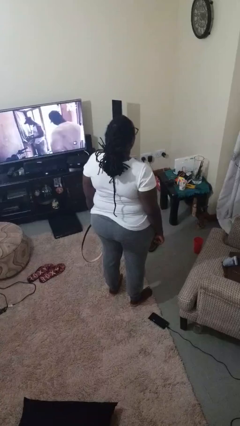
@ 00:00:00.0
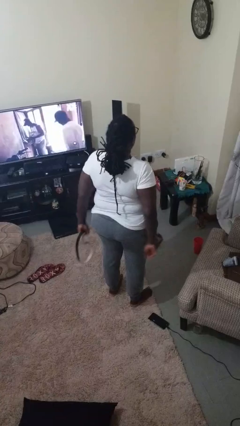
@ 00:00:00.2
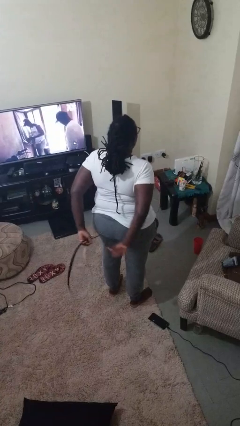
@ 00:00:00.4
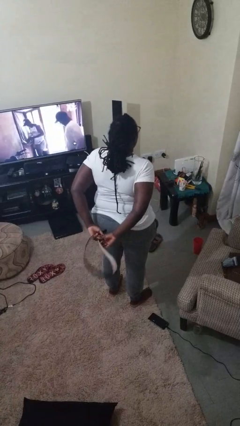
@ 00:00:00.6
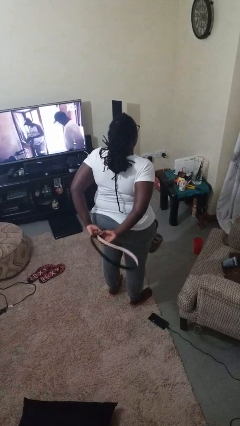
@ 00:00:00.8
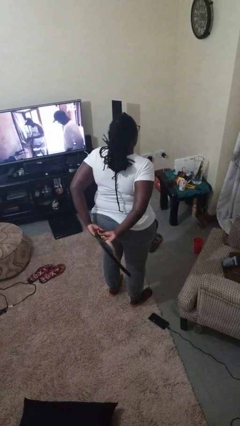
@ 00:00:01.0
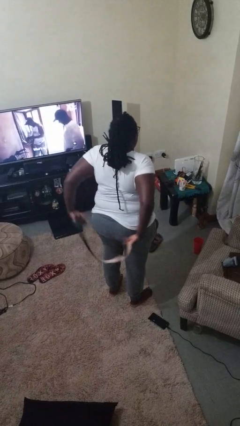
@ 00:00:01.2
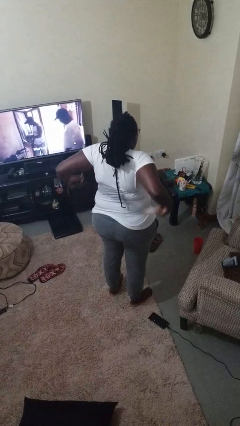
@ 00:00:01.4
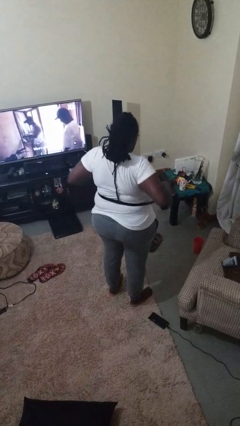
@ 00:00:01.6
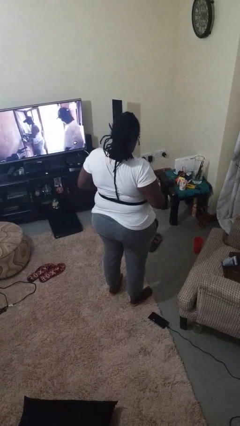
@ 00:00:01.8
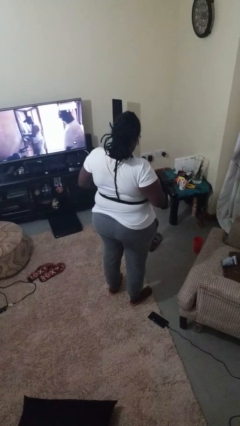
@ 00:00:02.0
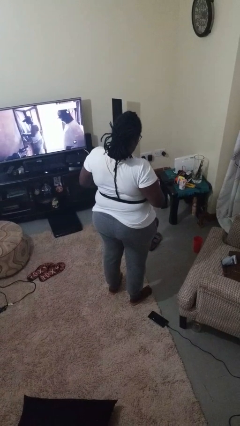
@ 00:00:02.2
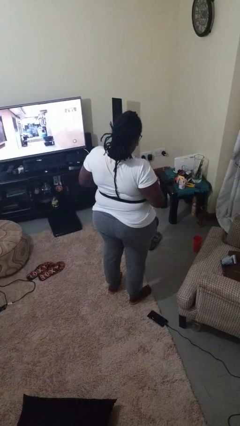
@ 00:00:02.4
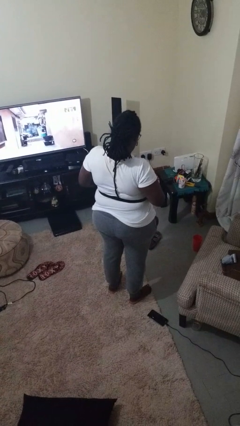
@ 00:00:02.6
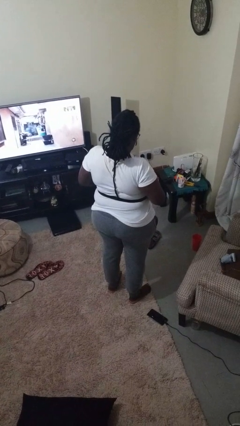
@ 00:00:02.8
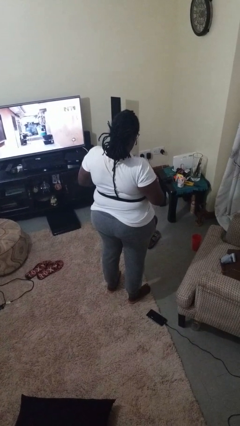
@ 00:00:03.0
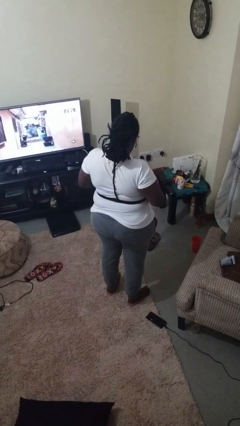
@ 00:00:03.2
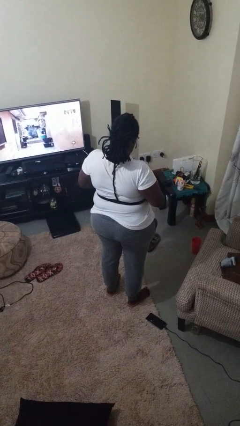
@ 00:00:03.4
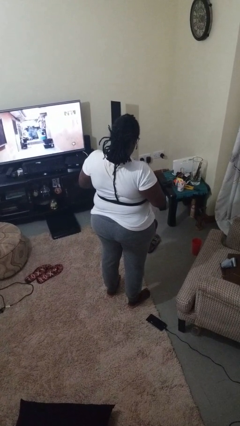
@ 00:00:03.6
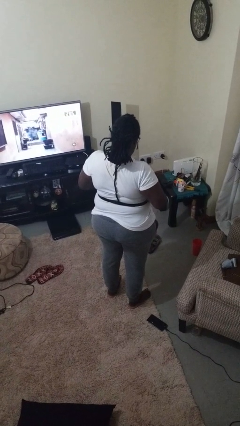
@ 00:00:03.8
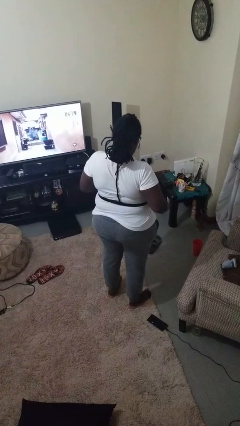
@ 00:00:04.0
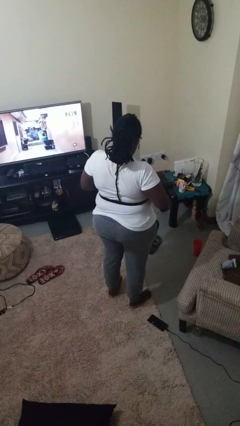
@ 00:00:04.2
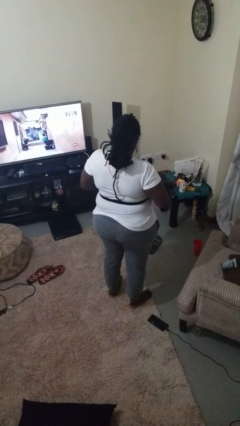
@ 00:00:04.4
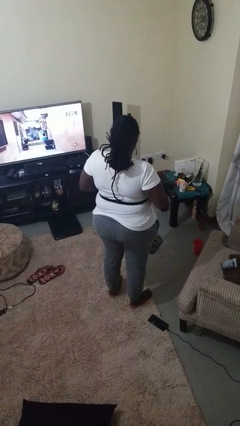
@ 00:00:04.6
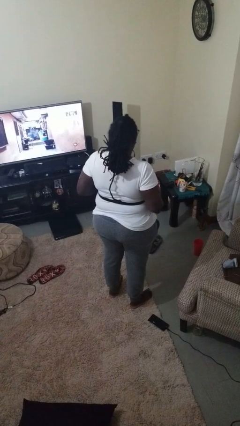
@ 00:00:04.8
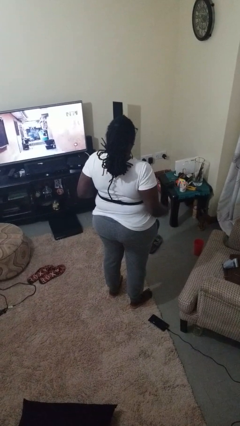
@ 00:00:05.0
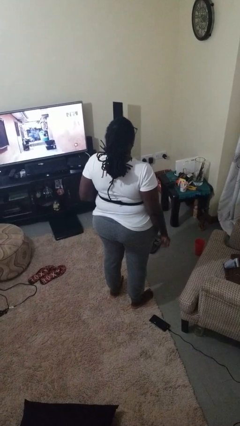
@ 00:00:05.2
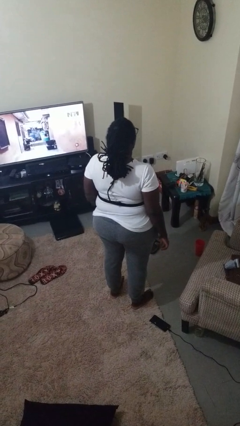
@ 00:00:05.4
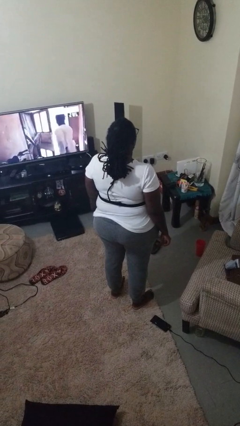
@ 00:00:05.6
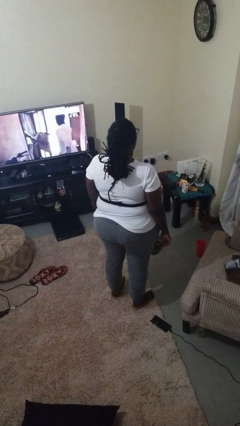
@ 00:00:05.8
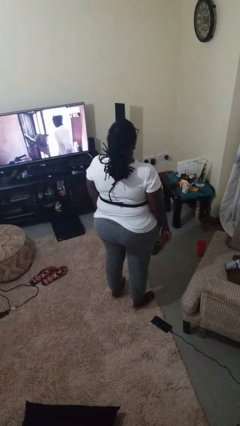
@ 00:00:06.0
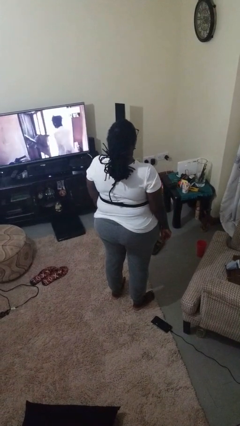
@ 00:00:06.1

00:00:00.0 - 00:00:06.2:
person puts on belt

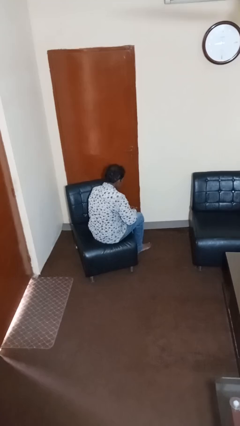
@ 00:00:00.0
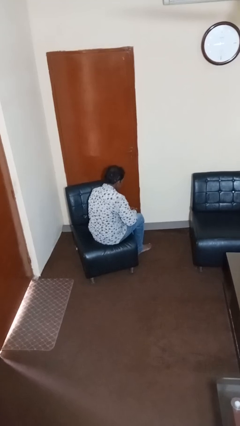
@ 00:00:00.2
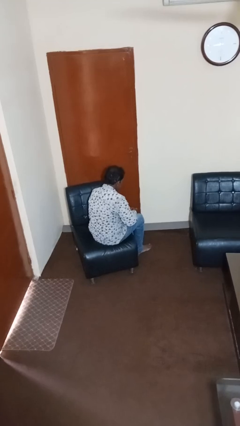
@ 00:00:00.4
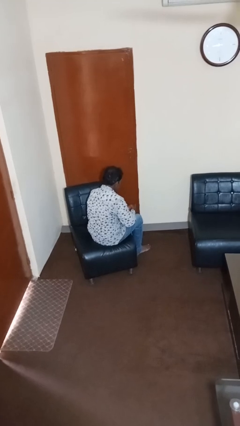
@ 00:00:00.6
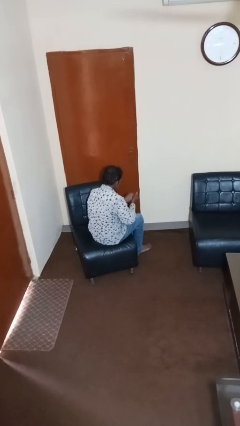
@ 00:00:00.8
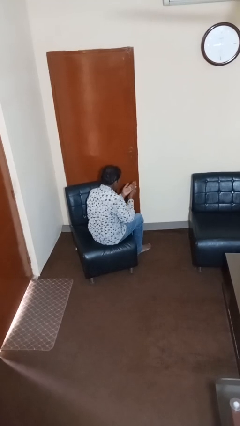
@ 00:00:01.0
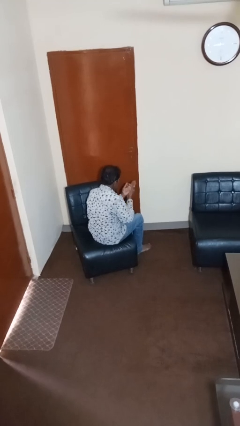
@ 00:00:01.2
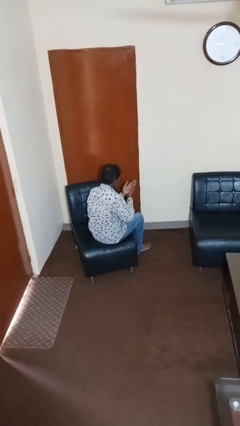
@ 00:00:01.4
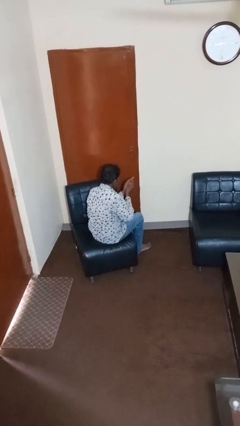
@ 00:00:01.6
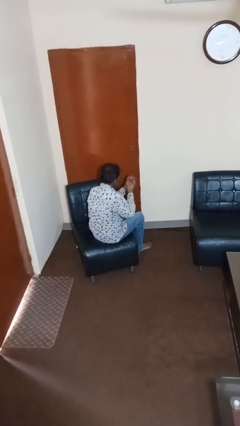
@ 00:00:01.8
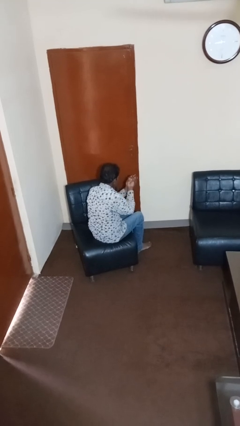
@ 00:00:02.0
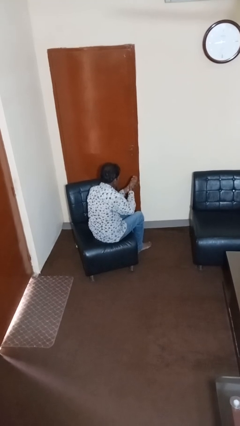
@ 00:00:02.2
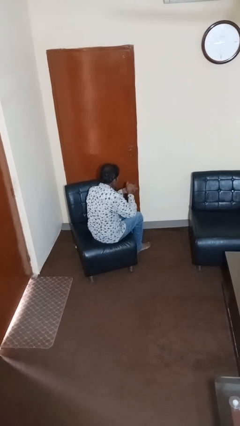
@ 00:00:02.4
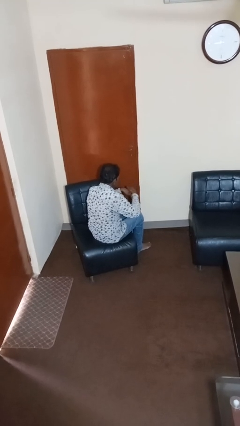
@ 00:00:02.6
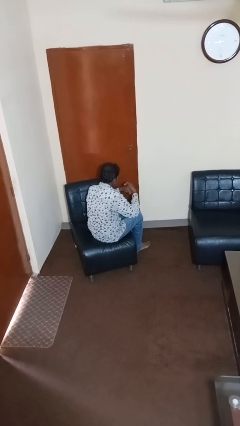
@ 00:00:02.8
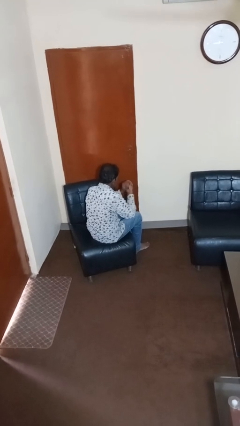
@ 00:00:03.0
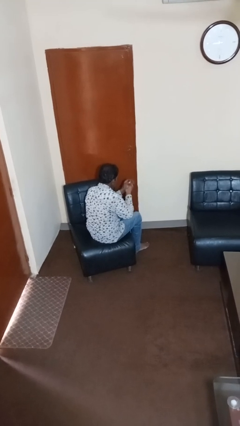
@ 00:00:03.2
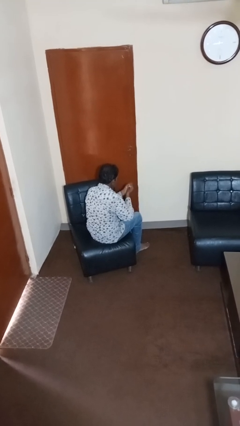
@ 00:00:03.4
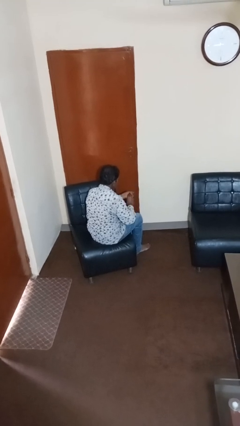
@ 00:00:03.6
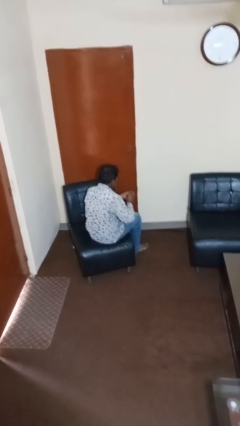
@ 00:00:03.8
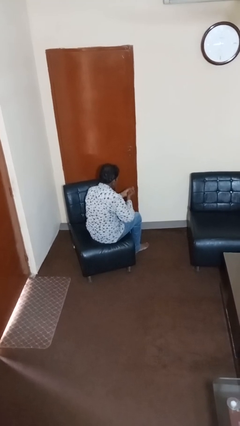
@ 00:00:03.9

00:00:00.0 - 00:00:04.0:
person looks at hands in lap

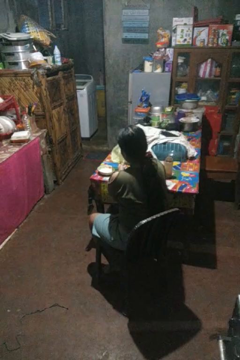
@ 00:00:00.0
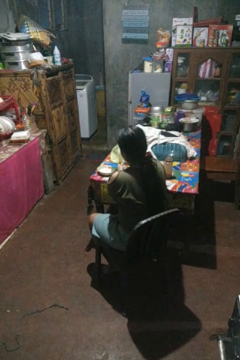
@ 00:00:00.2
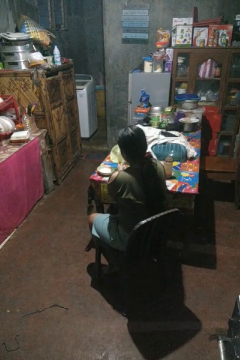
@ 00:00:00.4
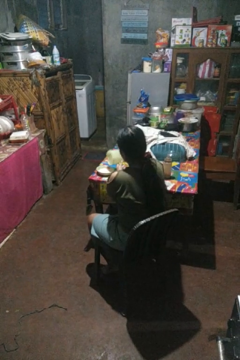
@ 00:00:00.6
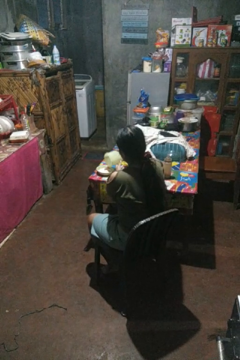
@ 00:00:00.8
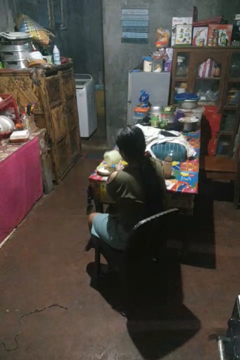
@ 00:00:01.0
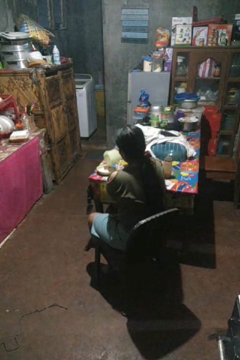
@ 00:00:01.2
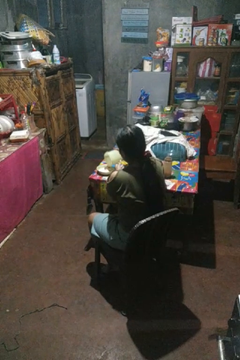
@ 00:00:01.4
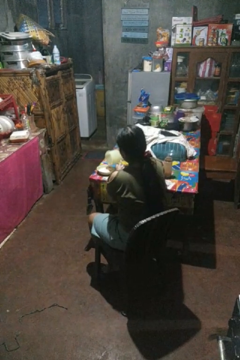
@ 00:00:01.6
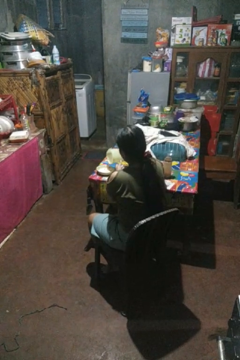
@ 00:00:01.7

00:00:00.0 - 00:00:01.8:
person pours into bowl

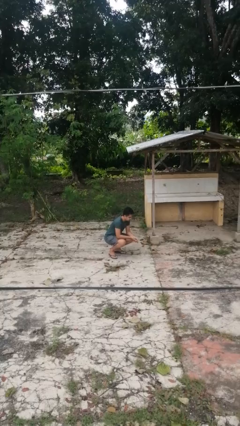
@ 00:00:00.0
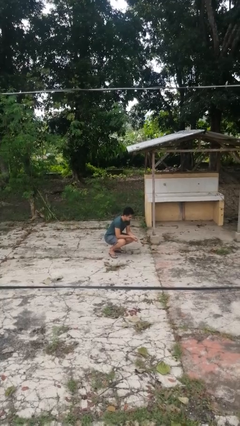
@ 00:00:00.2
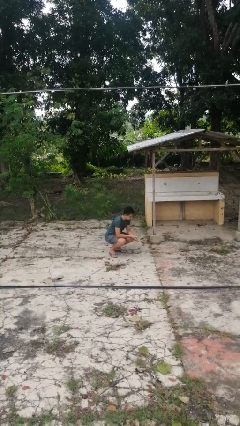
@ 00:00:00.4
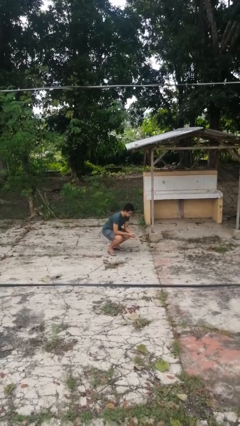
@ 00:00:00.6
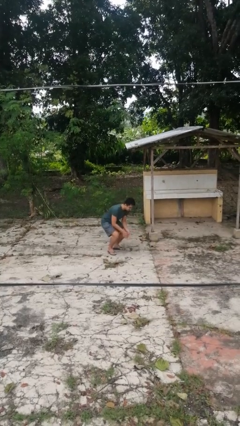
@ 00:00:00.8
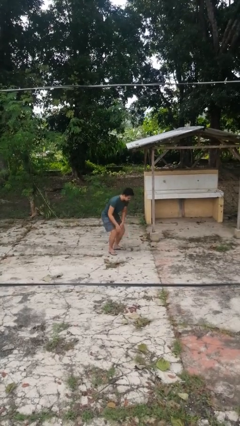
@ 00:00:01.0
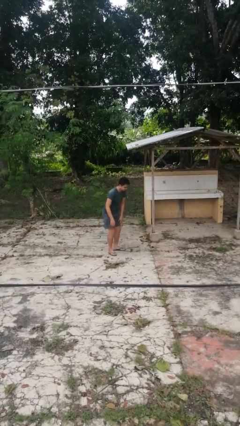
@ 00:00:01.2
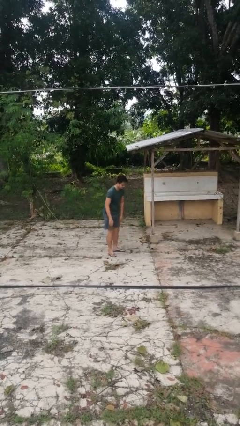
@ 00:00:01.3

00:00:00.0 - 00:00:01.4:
person stands up

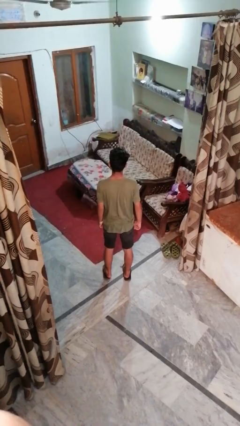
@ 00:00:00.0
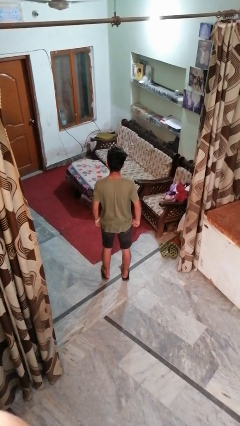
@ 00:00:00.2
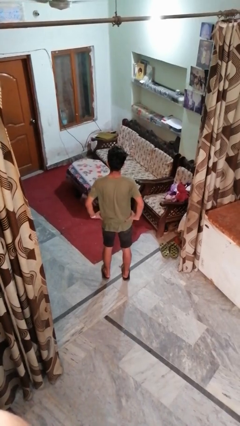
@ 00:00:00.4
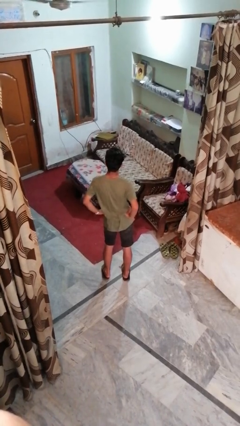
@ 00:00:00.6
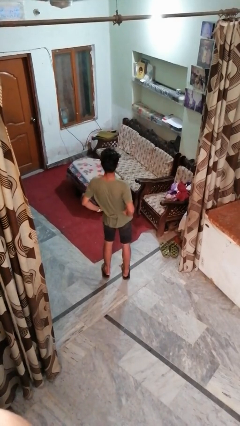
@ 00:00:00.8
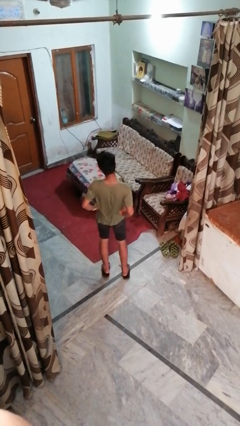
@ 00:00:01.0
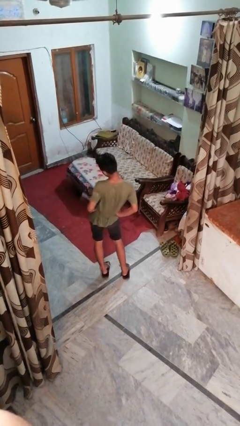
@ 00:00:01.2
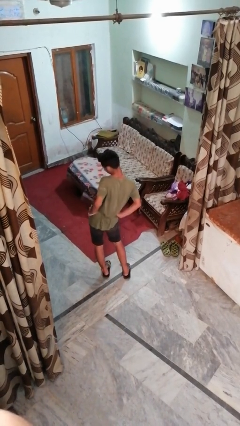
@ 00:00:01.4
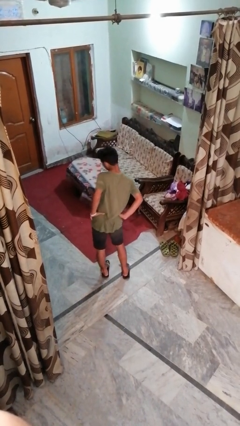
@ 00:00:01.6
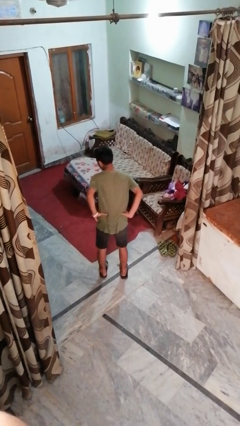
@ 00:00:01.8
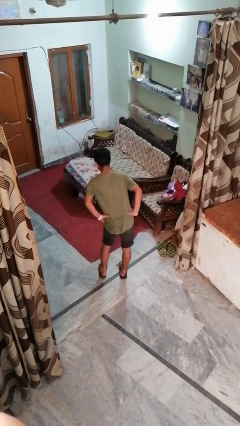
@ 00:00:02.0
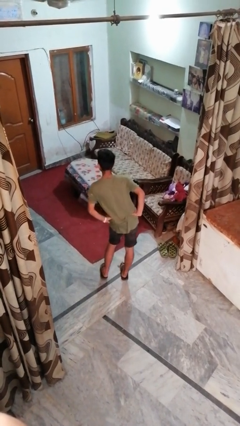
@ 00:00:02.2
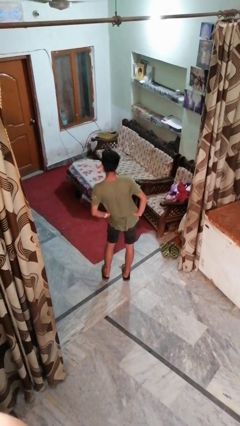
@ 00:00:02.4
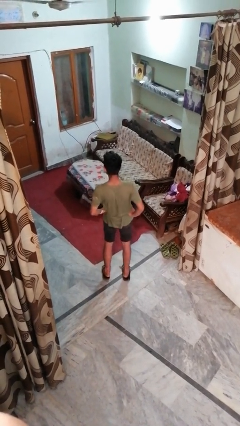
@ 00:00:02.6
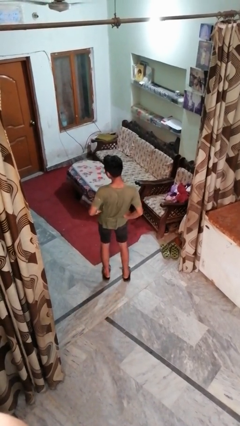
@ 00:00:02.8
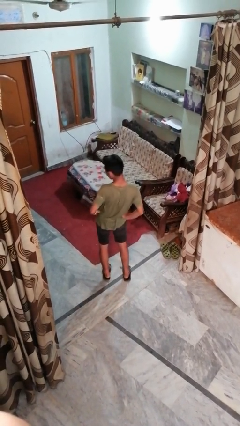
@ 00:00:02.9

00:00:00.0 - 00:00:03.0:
person wiggles hips

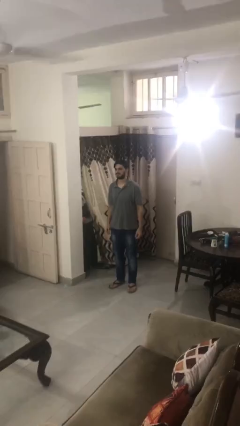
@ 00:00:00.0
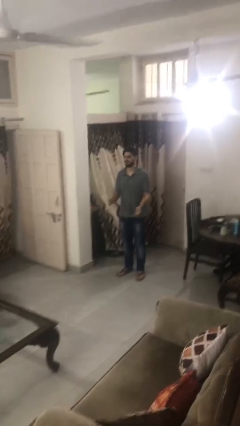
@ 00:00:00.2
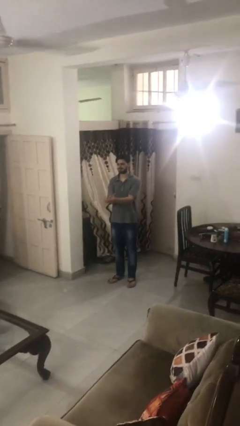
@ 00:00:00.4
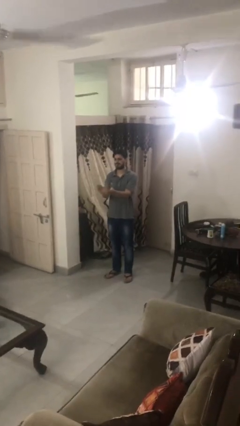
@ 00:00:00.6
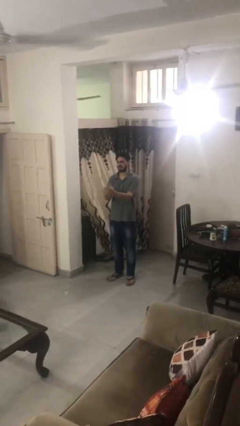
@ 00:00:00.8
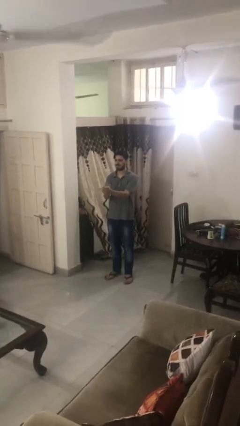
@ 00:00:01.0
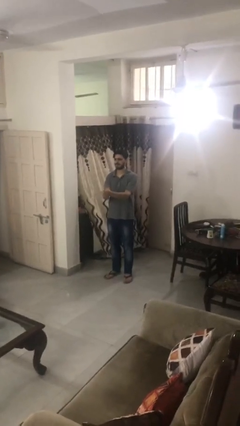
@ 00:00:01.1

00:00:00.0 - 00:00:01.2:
person claps hands
